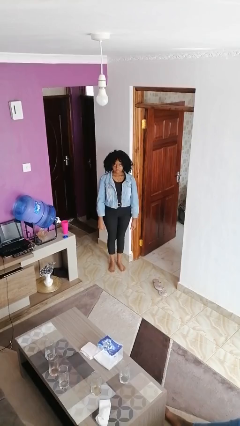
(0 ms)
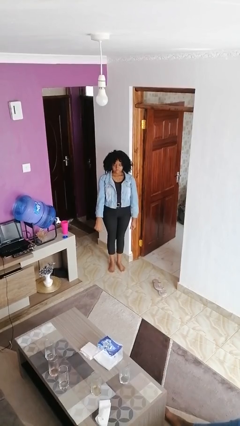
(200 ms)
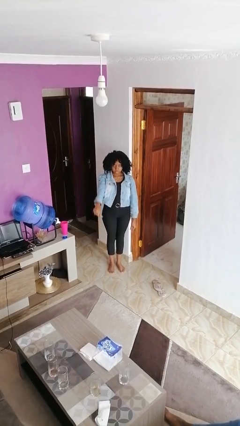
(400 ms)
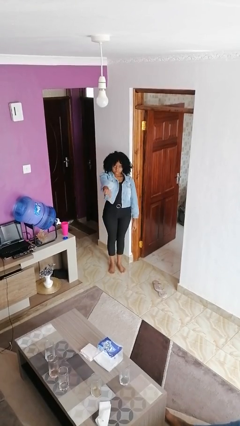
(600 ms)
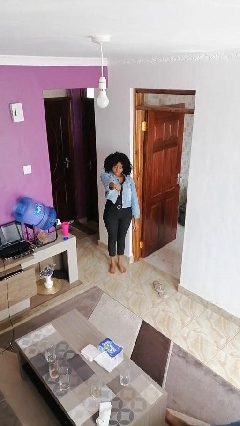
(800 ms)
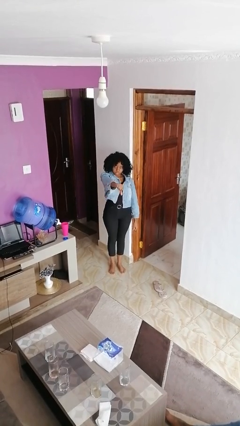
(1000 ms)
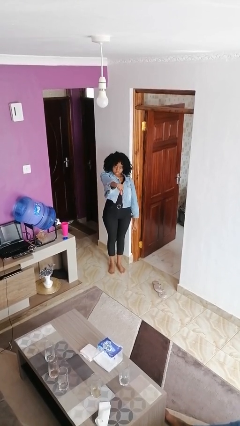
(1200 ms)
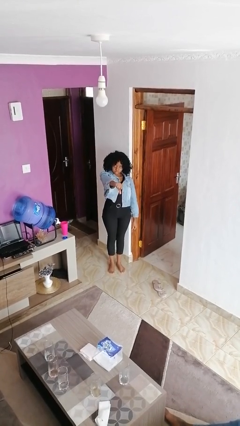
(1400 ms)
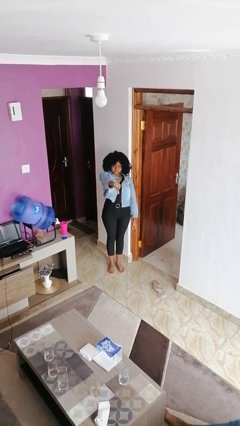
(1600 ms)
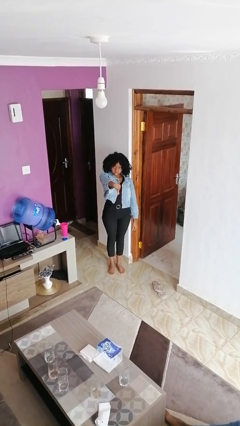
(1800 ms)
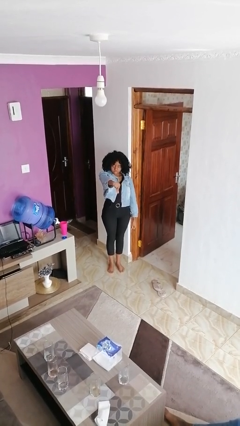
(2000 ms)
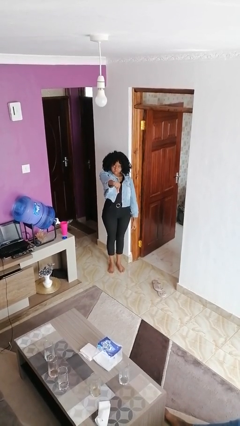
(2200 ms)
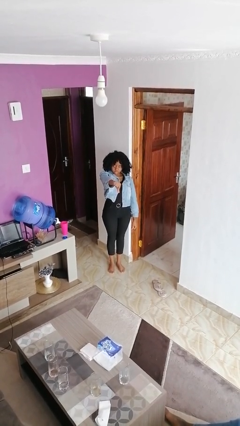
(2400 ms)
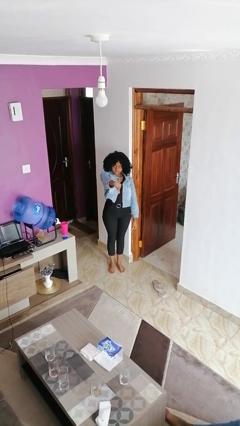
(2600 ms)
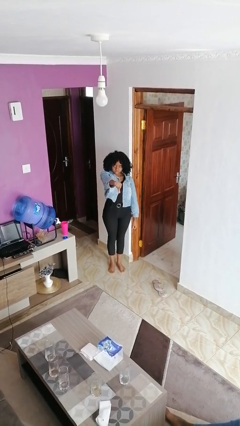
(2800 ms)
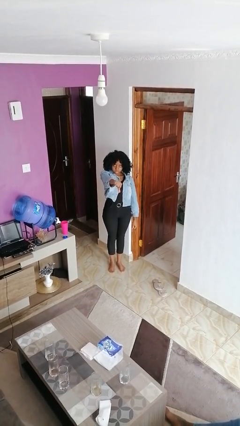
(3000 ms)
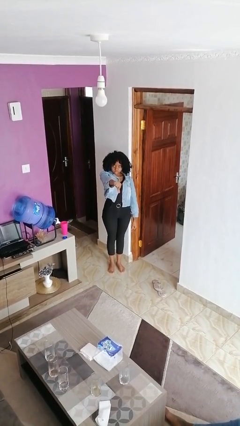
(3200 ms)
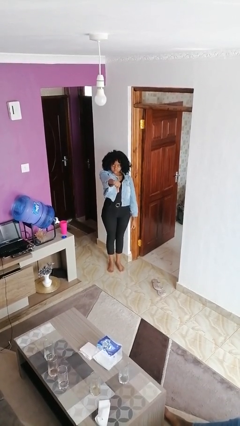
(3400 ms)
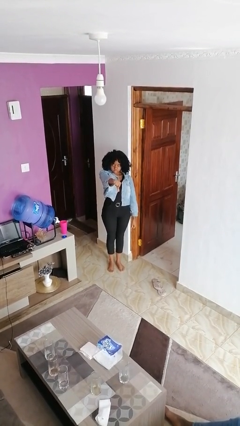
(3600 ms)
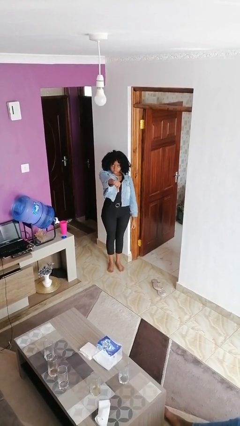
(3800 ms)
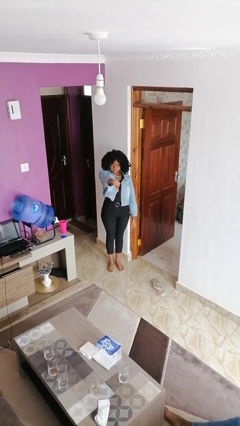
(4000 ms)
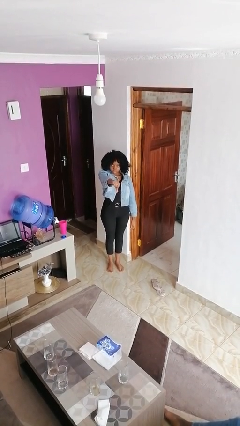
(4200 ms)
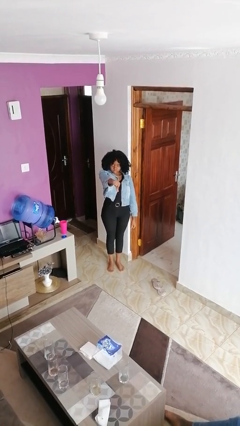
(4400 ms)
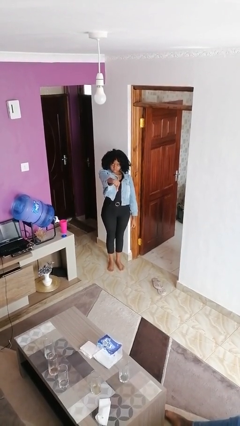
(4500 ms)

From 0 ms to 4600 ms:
person gestures thumbs down

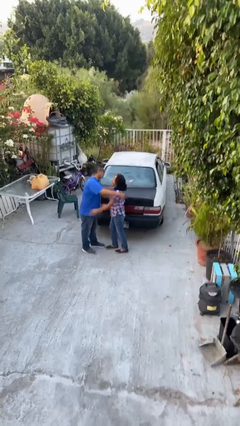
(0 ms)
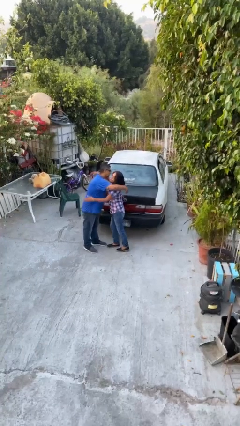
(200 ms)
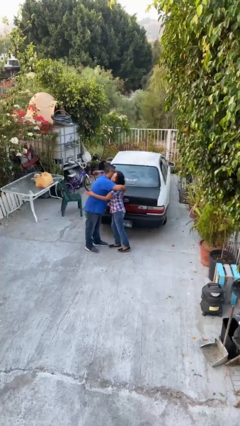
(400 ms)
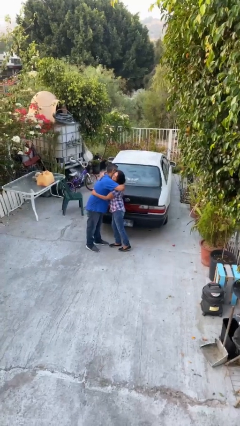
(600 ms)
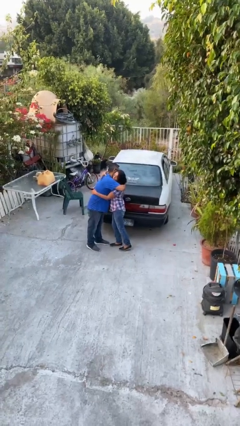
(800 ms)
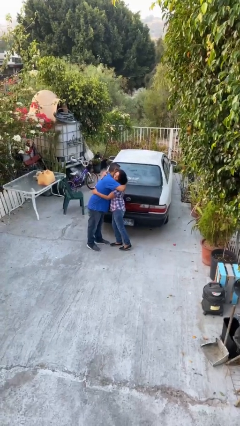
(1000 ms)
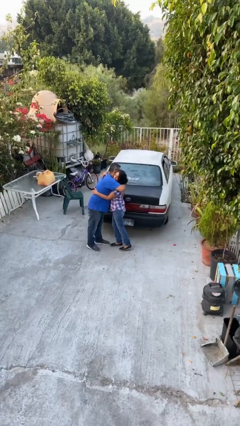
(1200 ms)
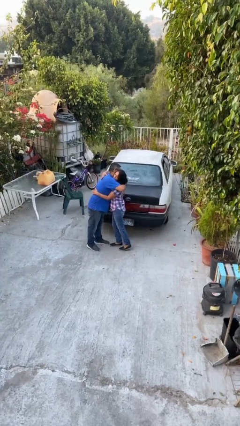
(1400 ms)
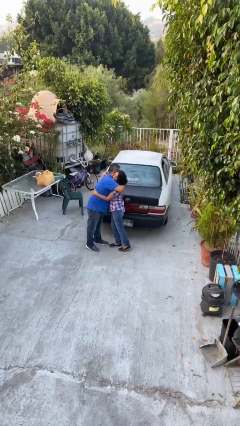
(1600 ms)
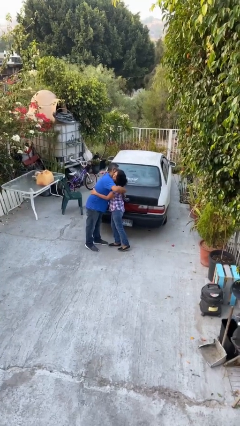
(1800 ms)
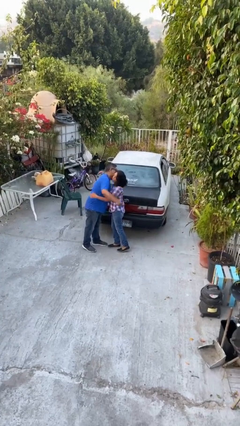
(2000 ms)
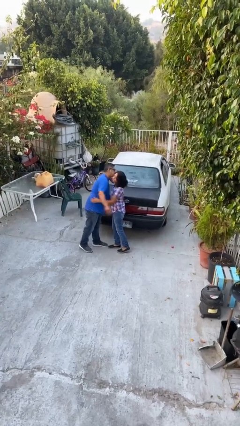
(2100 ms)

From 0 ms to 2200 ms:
person embraces person

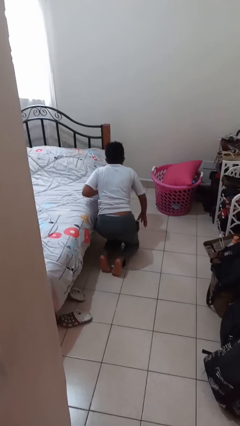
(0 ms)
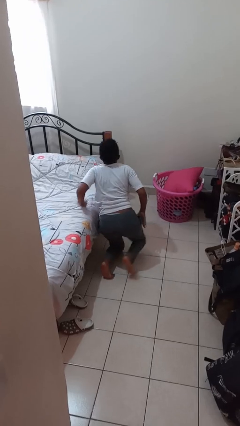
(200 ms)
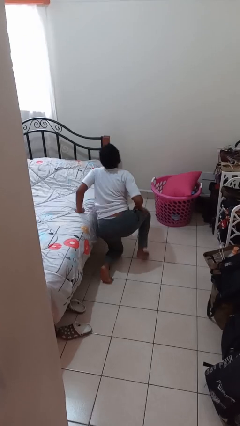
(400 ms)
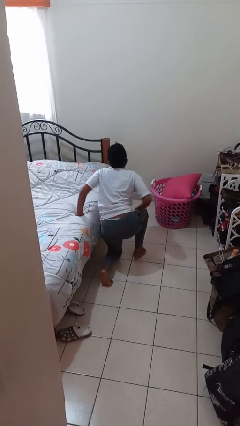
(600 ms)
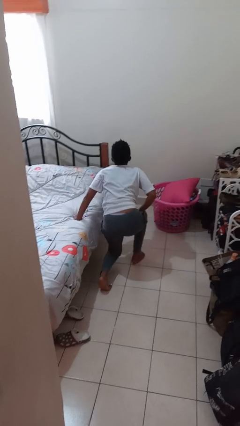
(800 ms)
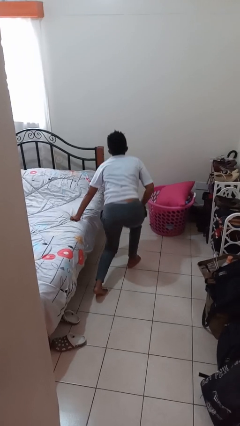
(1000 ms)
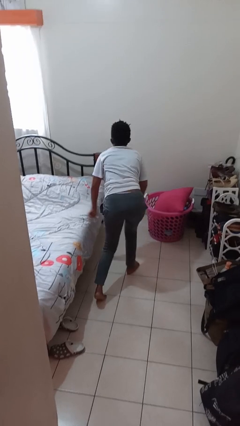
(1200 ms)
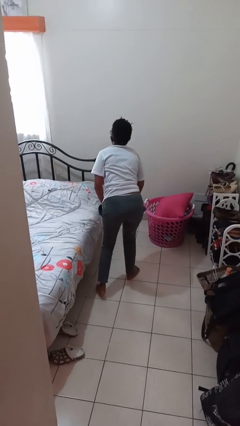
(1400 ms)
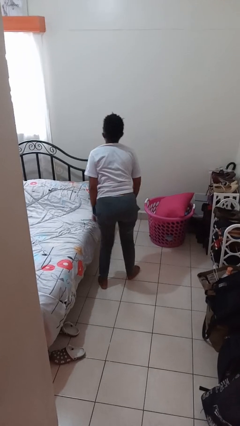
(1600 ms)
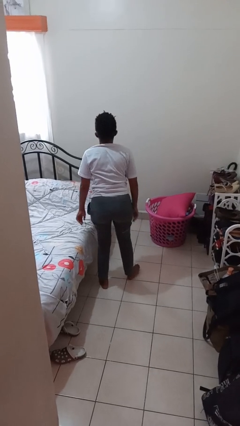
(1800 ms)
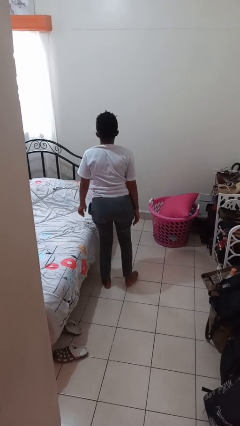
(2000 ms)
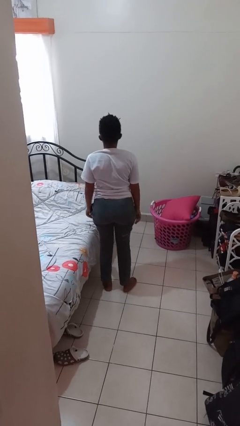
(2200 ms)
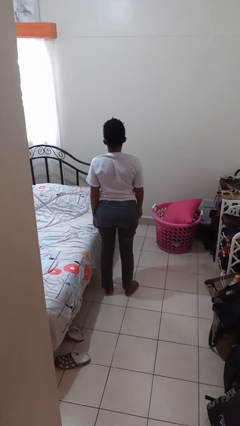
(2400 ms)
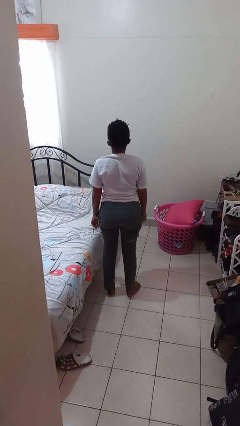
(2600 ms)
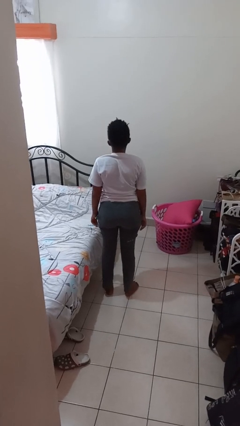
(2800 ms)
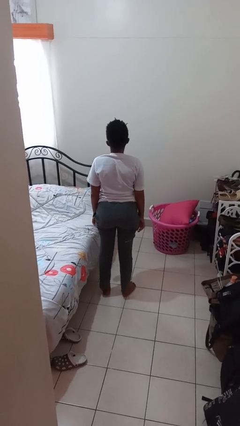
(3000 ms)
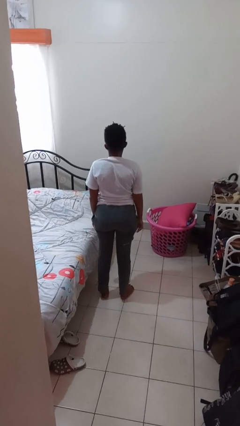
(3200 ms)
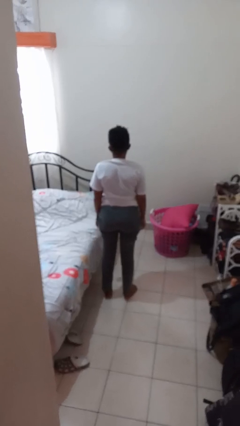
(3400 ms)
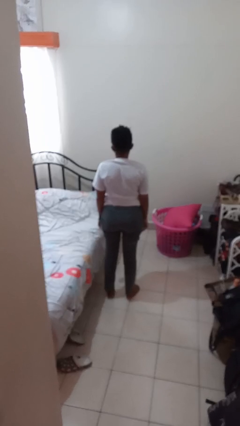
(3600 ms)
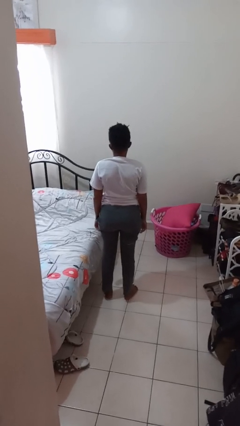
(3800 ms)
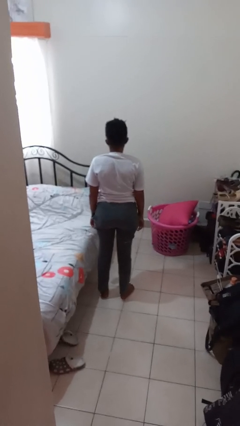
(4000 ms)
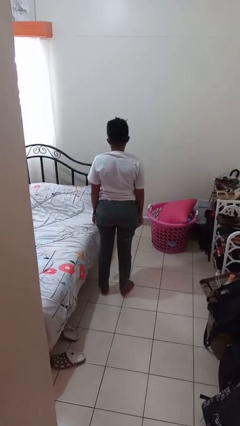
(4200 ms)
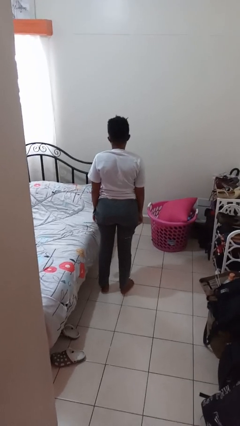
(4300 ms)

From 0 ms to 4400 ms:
person stands up from floor

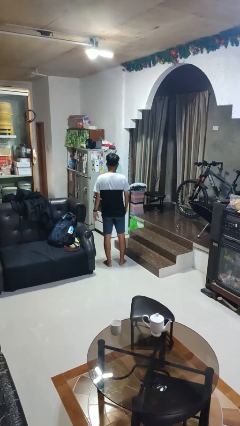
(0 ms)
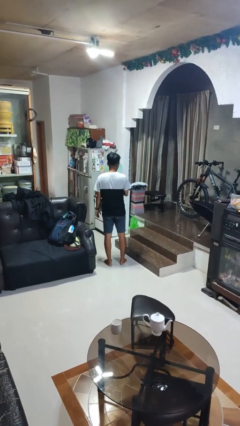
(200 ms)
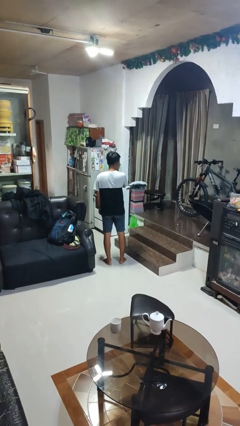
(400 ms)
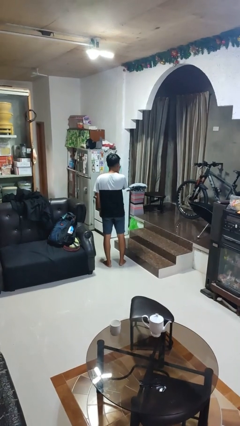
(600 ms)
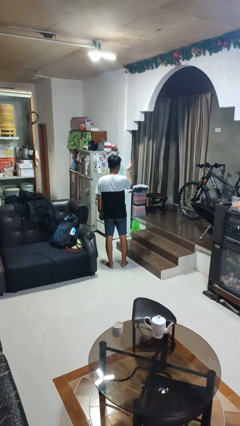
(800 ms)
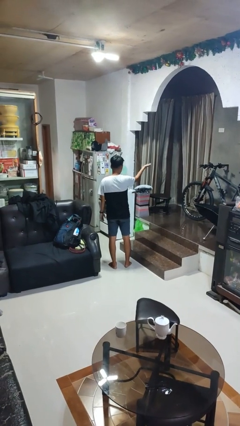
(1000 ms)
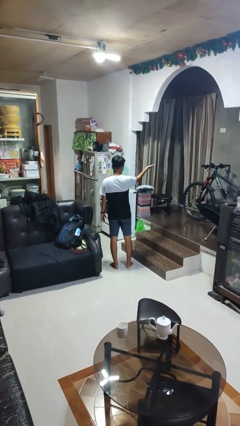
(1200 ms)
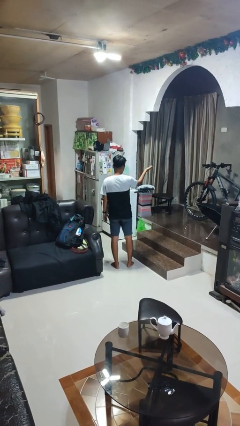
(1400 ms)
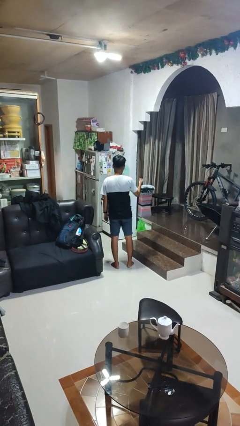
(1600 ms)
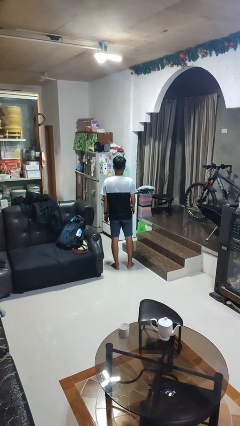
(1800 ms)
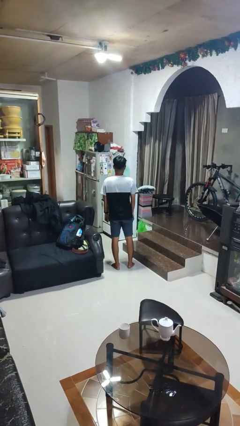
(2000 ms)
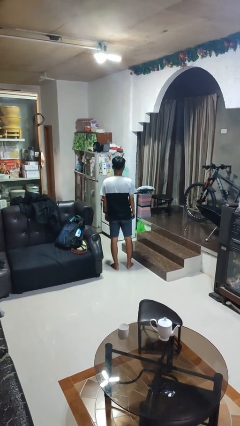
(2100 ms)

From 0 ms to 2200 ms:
person gestures blow kiss

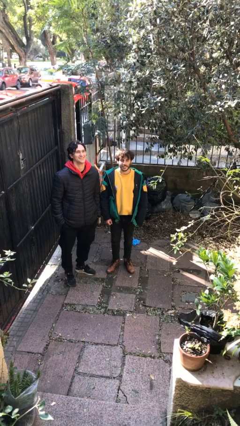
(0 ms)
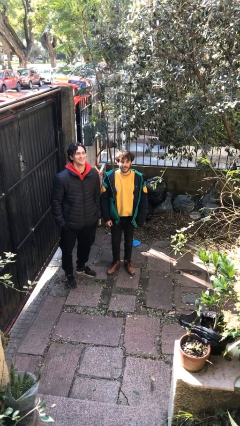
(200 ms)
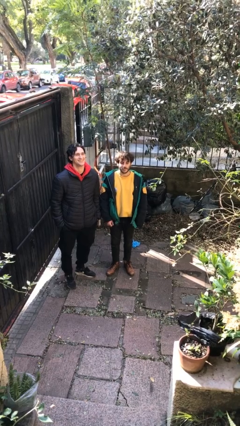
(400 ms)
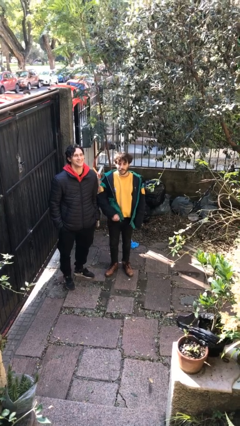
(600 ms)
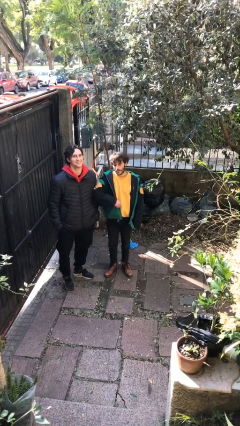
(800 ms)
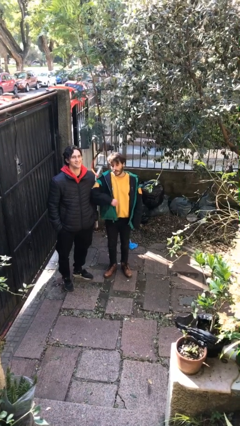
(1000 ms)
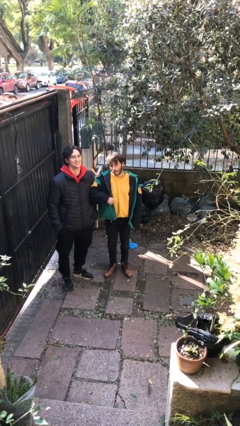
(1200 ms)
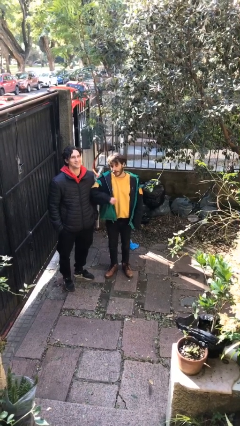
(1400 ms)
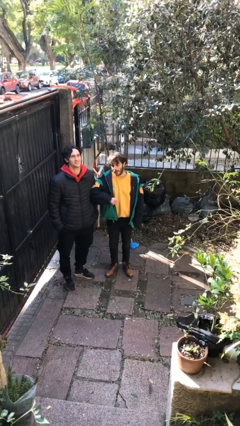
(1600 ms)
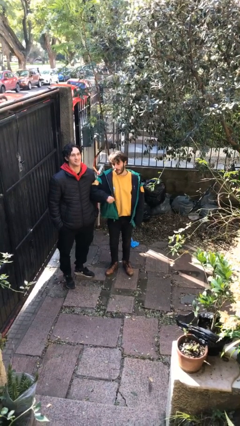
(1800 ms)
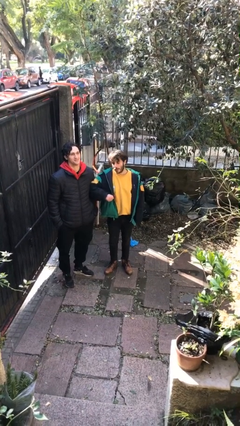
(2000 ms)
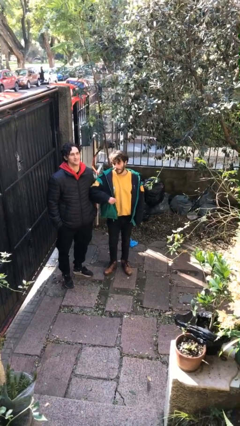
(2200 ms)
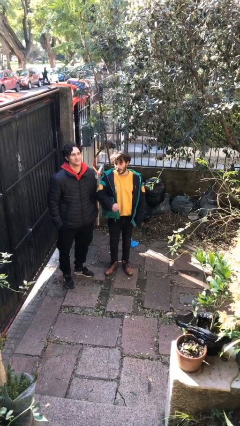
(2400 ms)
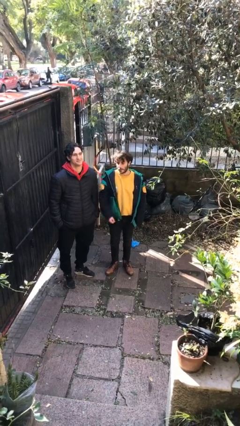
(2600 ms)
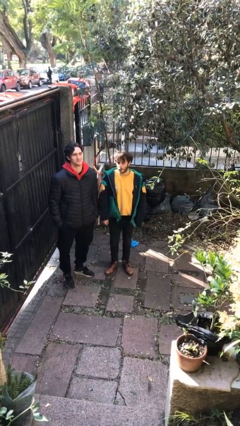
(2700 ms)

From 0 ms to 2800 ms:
person nudges person with elbow

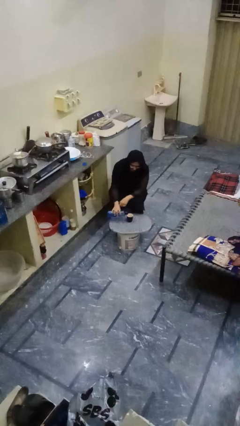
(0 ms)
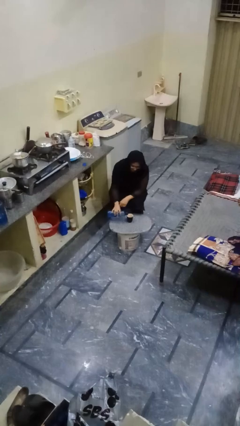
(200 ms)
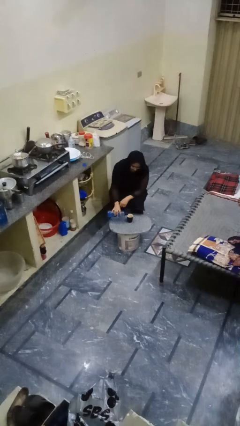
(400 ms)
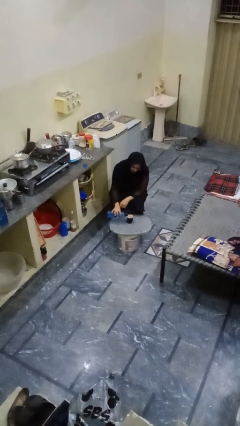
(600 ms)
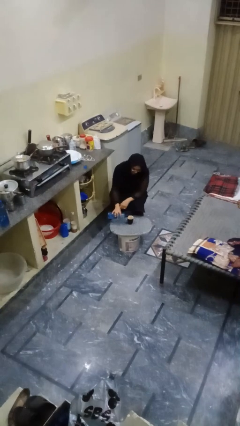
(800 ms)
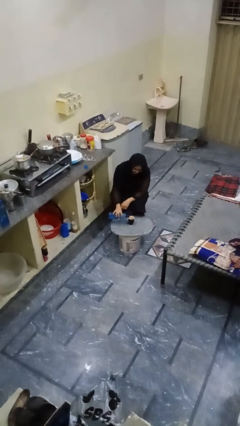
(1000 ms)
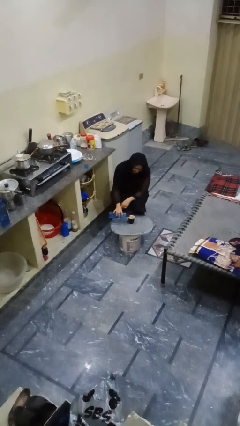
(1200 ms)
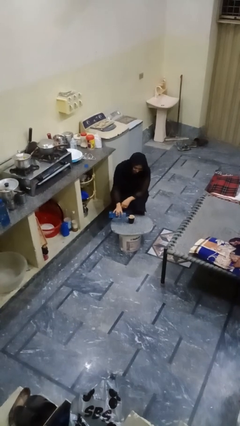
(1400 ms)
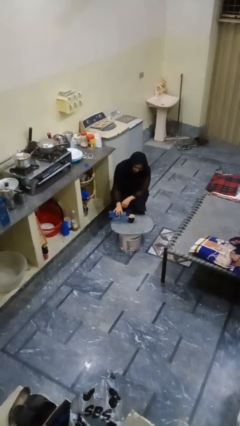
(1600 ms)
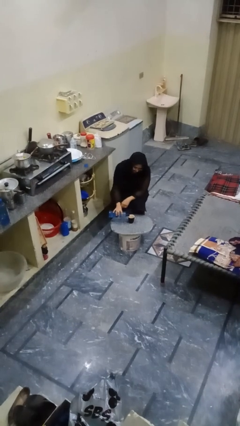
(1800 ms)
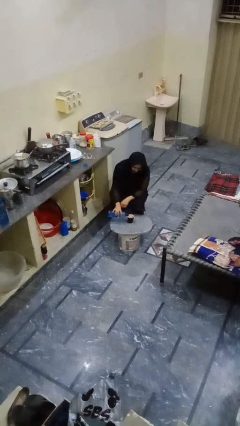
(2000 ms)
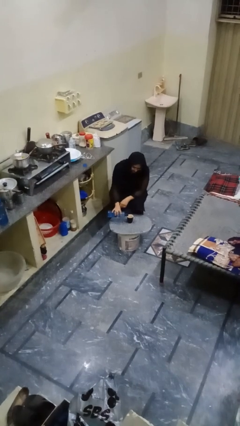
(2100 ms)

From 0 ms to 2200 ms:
person pours liquid into cup
